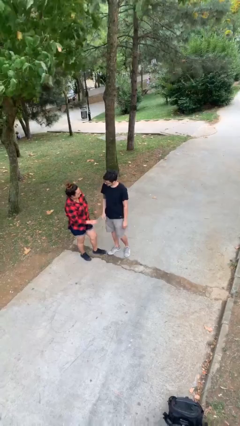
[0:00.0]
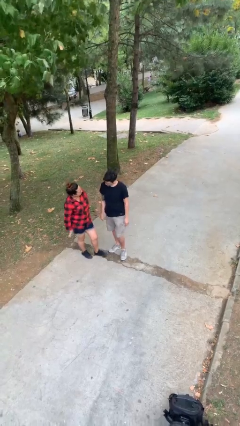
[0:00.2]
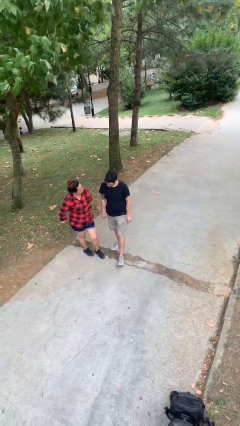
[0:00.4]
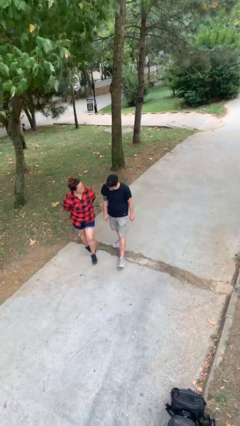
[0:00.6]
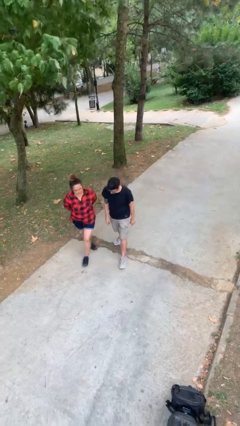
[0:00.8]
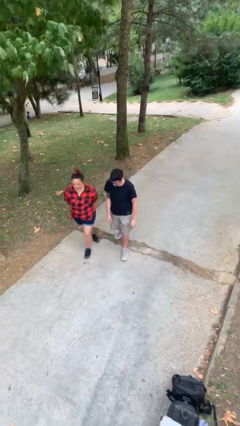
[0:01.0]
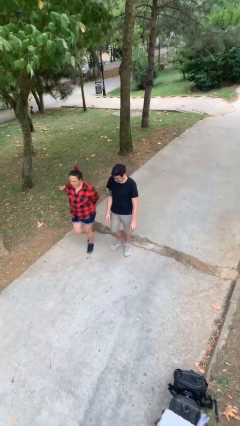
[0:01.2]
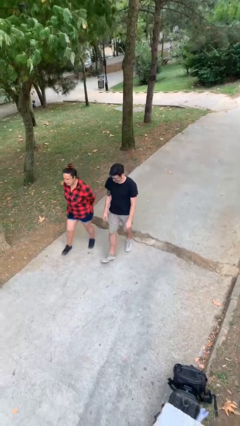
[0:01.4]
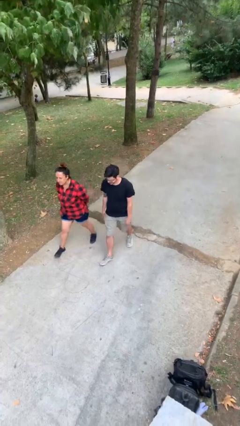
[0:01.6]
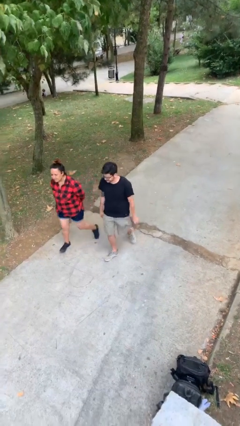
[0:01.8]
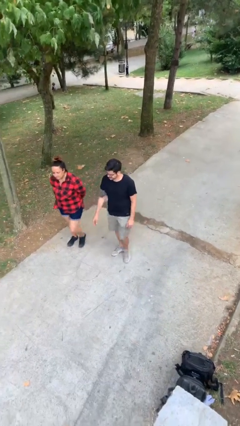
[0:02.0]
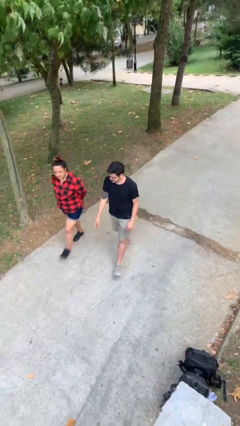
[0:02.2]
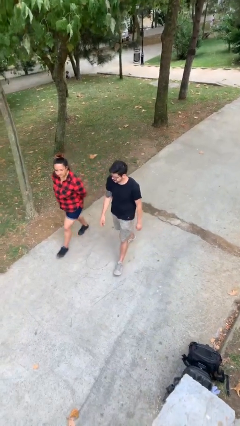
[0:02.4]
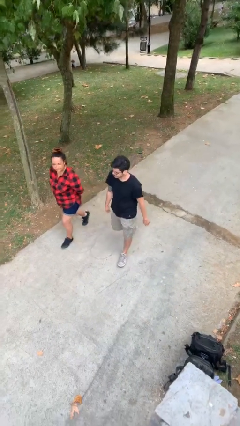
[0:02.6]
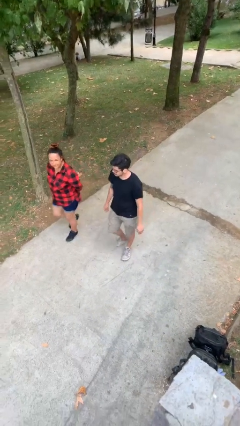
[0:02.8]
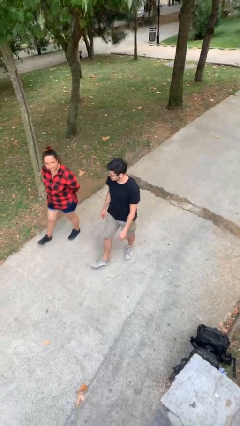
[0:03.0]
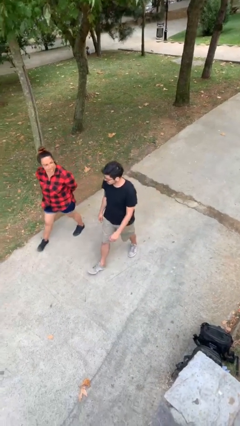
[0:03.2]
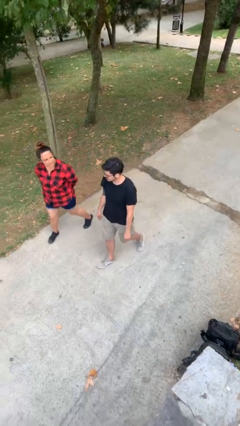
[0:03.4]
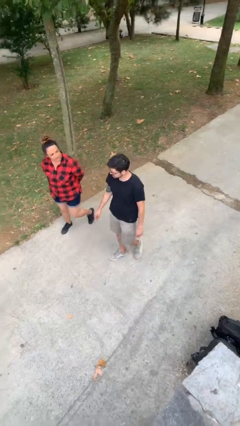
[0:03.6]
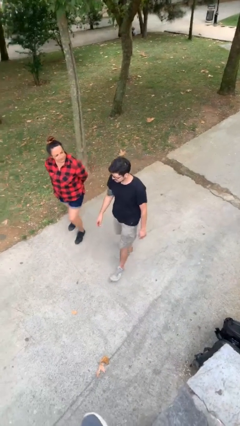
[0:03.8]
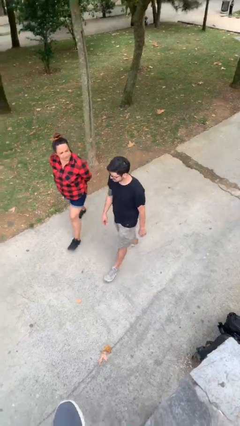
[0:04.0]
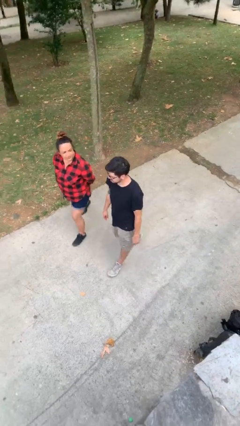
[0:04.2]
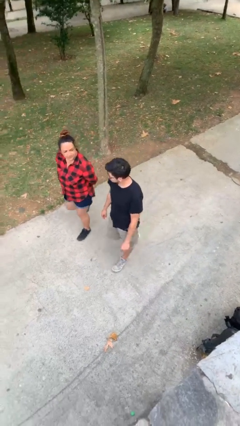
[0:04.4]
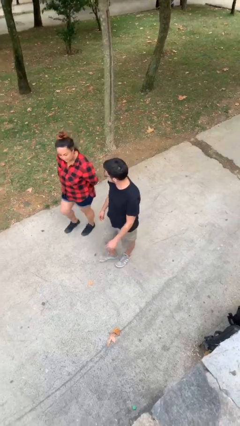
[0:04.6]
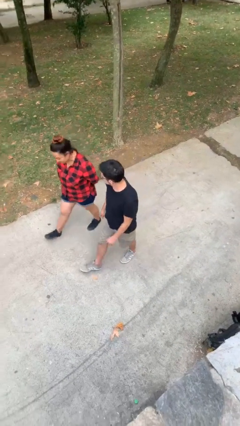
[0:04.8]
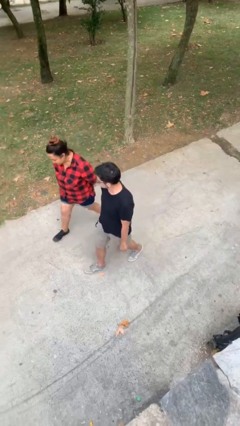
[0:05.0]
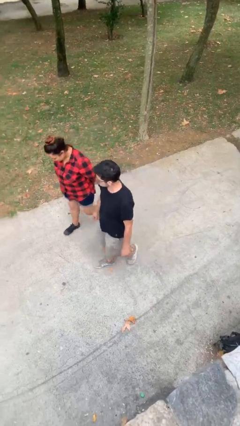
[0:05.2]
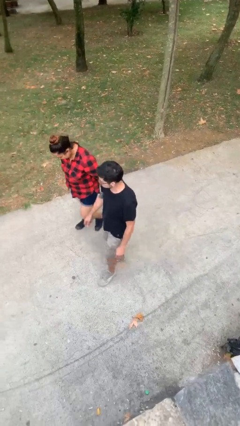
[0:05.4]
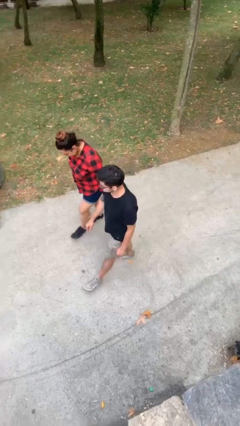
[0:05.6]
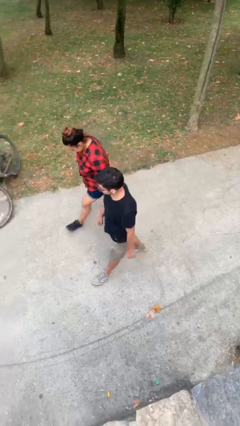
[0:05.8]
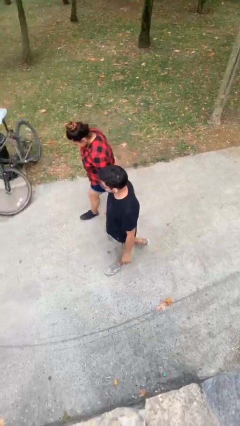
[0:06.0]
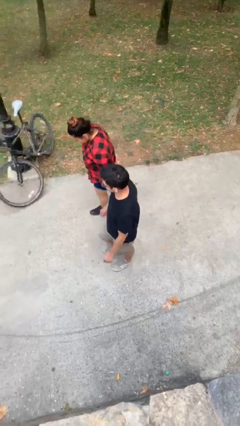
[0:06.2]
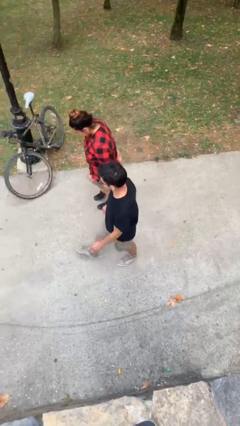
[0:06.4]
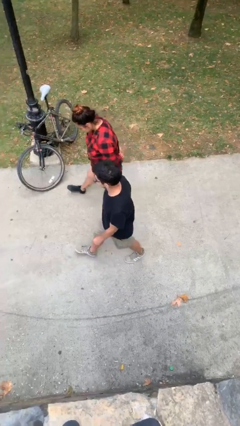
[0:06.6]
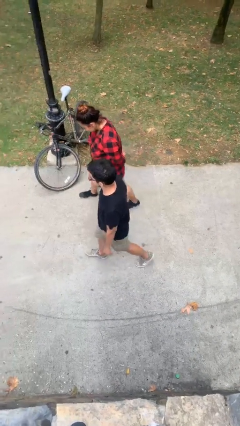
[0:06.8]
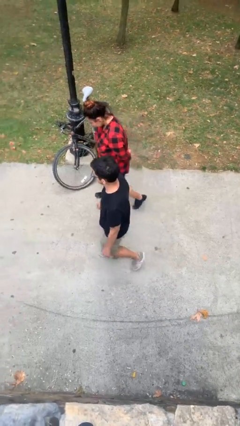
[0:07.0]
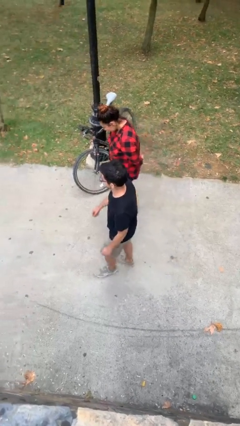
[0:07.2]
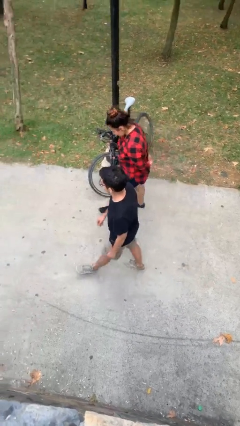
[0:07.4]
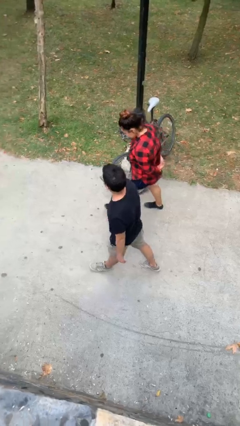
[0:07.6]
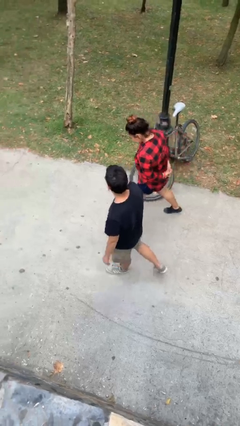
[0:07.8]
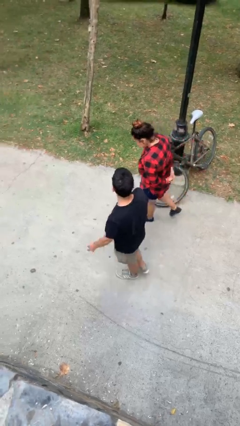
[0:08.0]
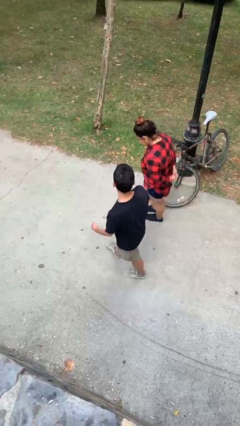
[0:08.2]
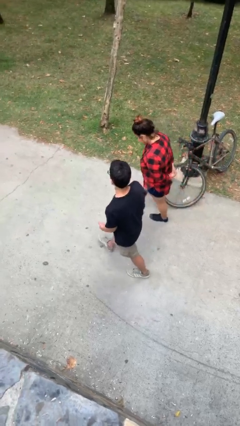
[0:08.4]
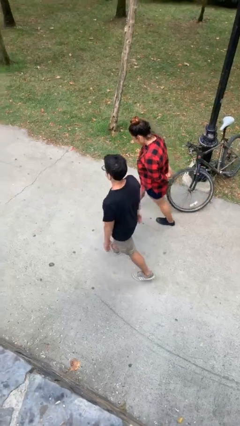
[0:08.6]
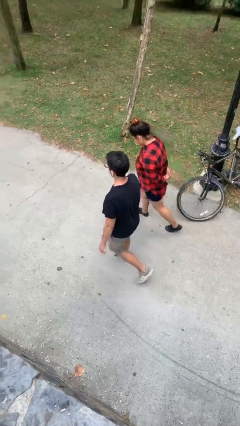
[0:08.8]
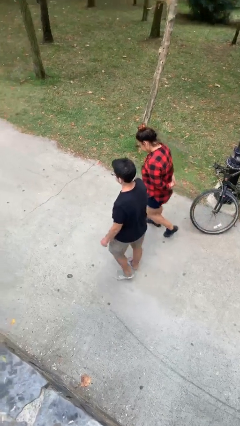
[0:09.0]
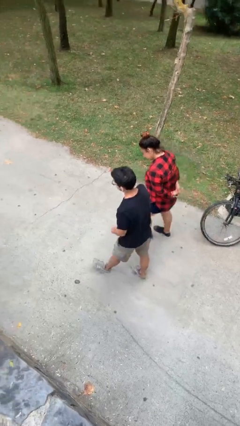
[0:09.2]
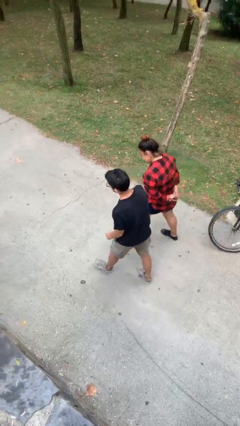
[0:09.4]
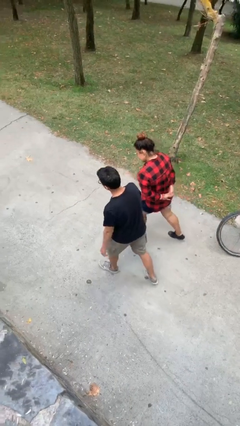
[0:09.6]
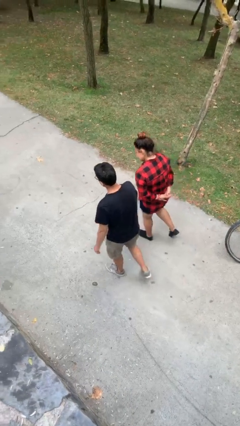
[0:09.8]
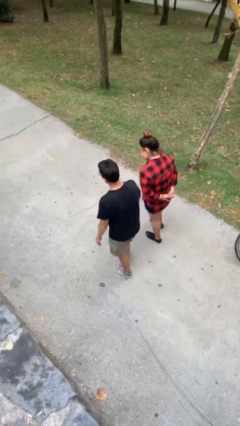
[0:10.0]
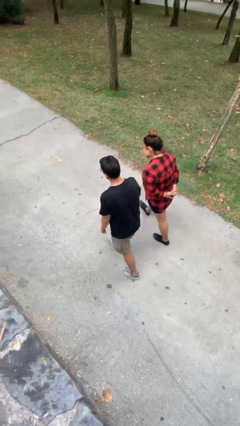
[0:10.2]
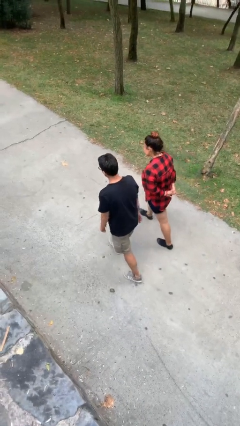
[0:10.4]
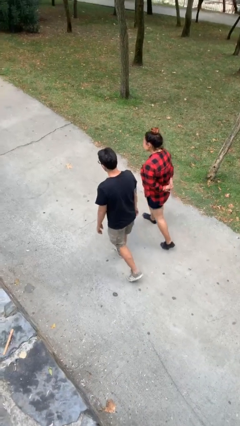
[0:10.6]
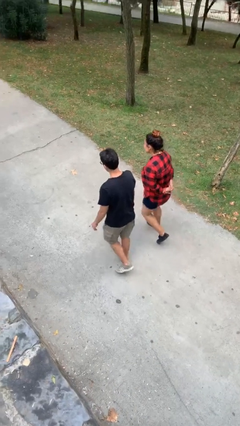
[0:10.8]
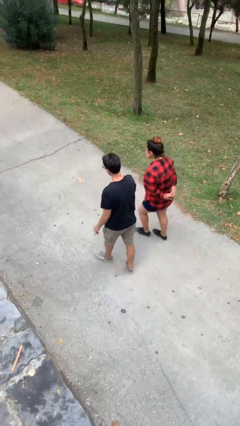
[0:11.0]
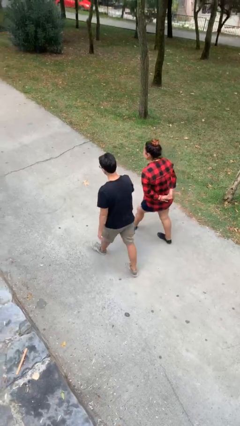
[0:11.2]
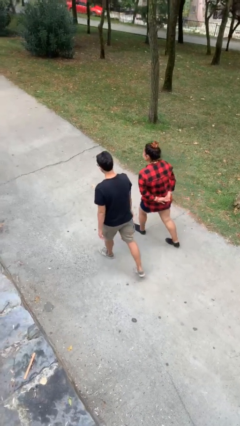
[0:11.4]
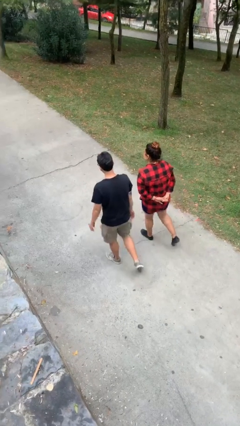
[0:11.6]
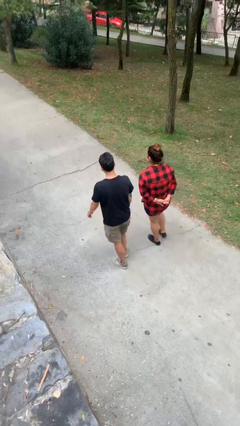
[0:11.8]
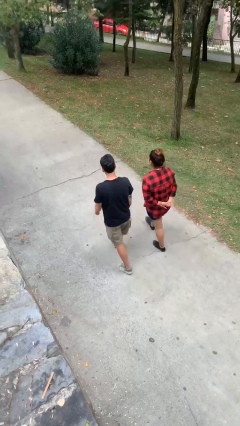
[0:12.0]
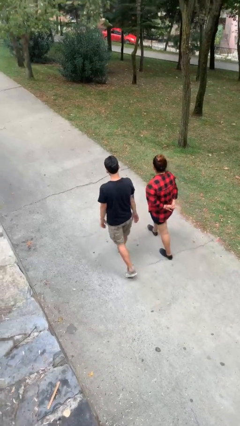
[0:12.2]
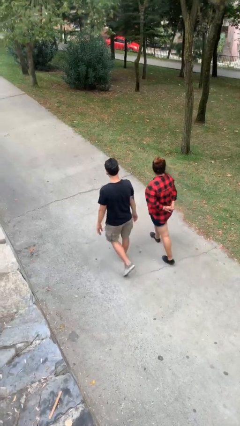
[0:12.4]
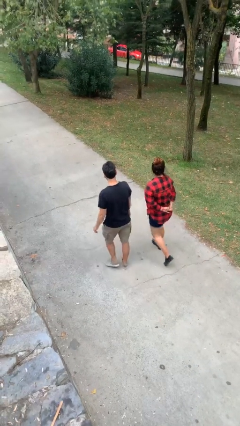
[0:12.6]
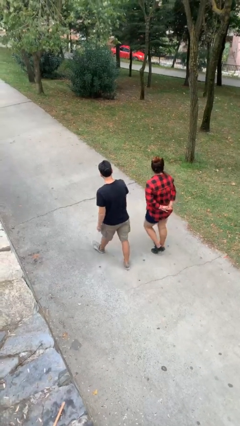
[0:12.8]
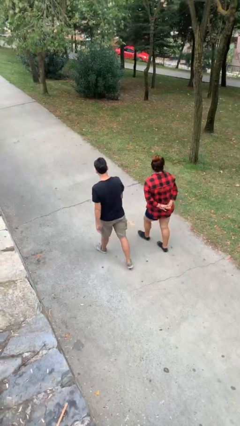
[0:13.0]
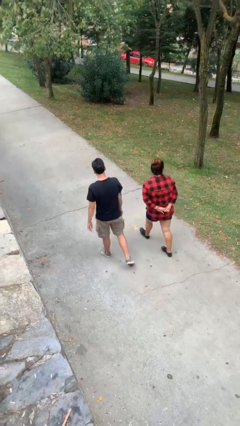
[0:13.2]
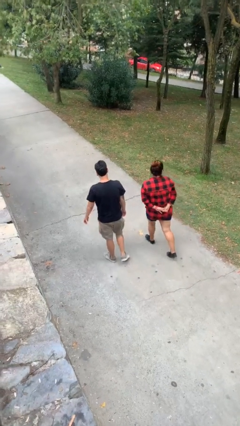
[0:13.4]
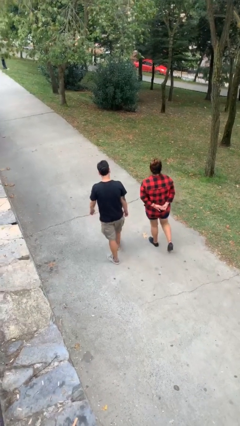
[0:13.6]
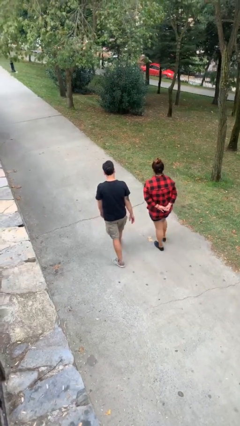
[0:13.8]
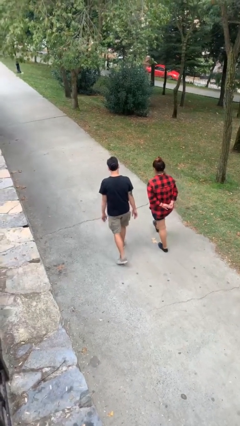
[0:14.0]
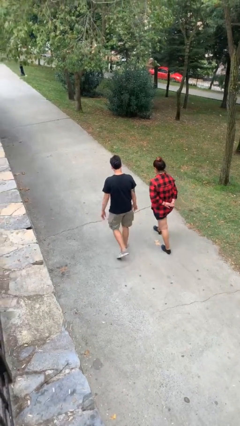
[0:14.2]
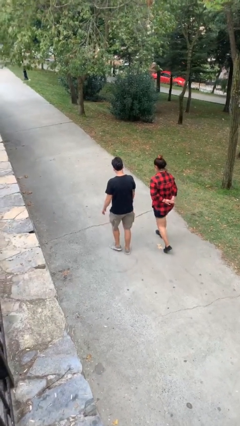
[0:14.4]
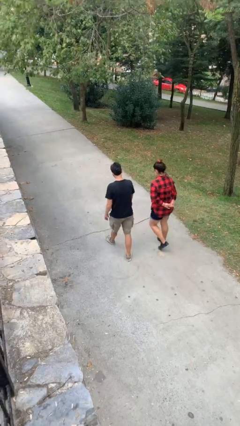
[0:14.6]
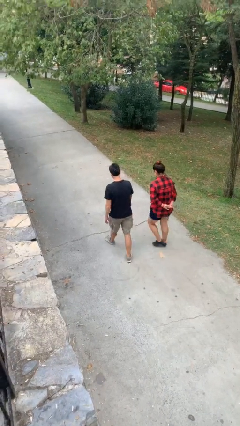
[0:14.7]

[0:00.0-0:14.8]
person talks to person

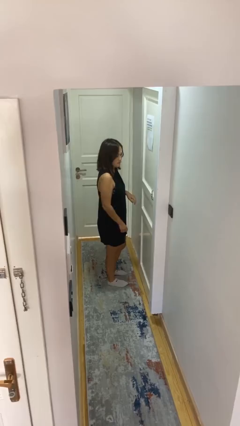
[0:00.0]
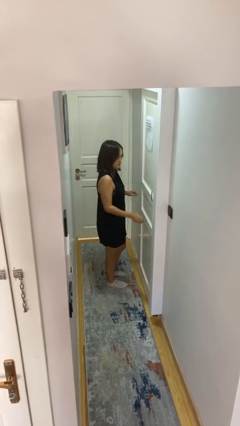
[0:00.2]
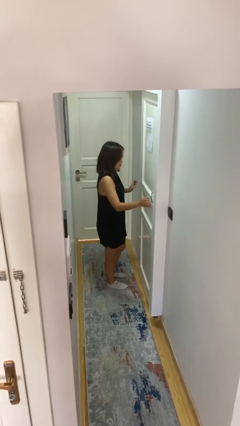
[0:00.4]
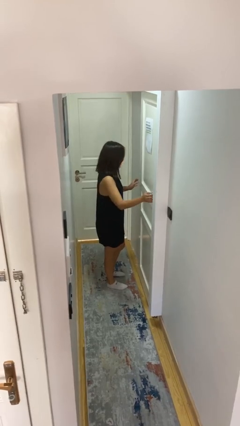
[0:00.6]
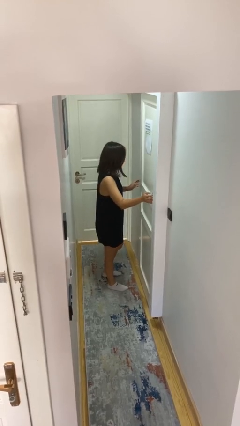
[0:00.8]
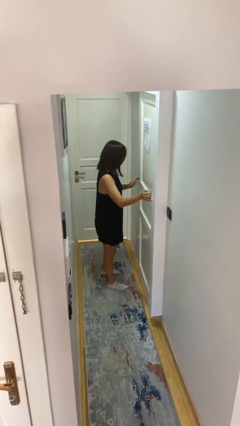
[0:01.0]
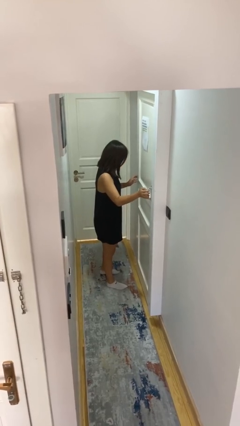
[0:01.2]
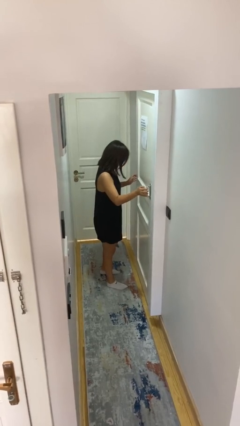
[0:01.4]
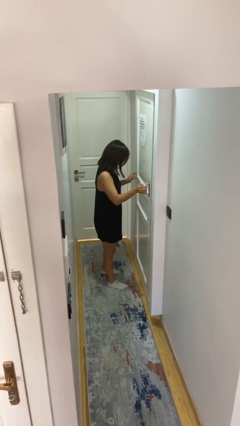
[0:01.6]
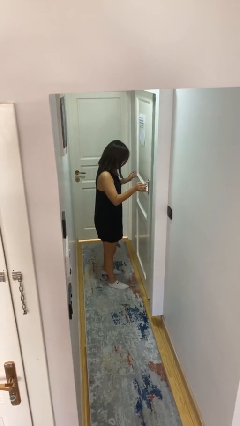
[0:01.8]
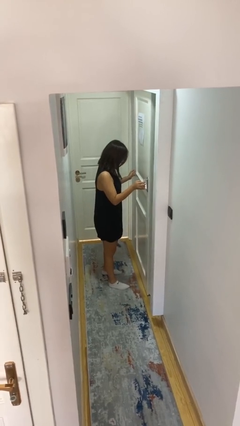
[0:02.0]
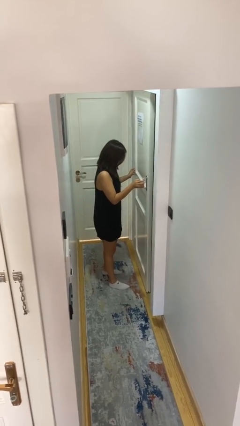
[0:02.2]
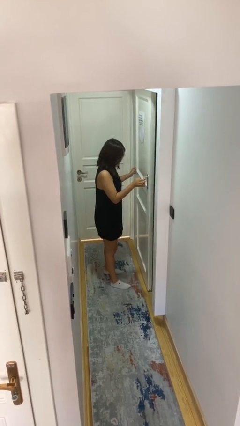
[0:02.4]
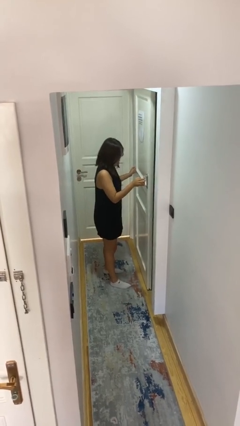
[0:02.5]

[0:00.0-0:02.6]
person opens sliding door

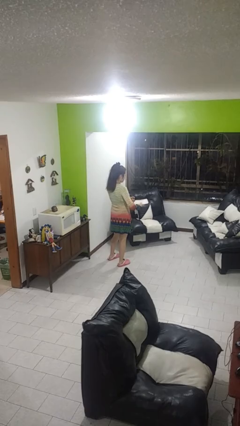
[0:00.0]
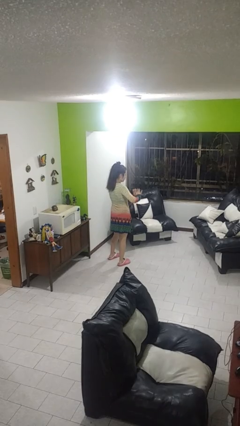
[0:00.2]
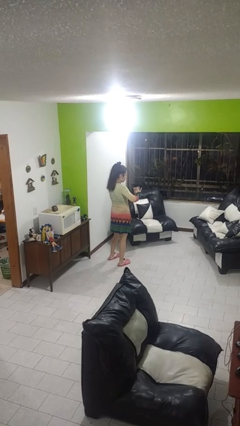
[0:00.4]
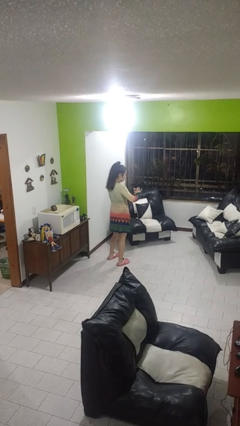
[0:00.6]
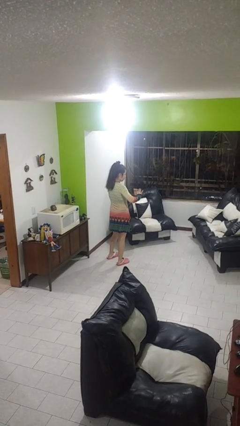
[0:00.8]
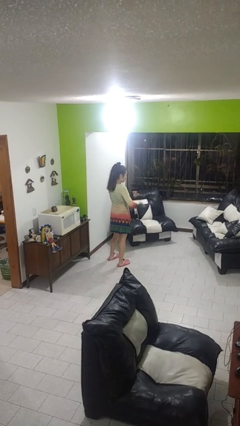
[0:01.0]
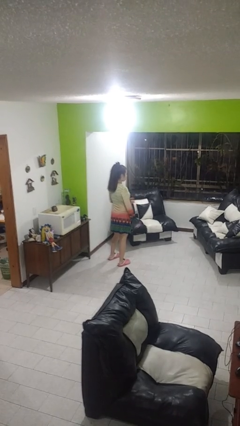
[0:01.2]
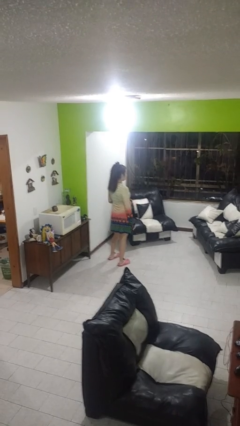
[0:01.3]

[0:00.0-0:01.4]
person clips fingernails
